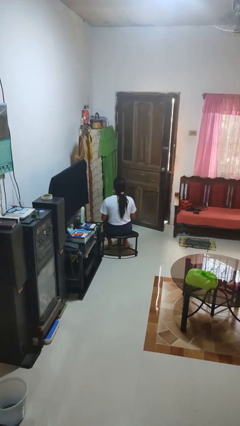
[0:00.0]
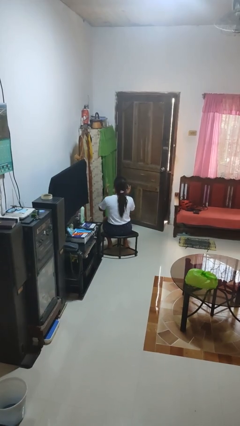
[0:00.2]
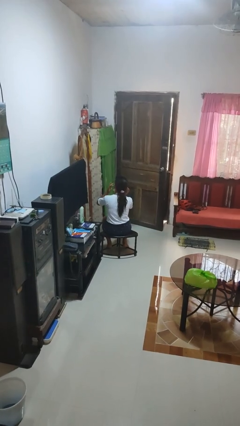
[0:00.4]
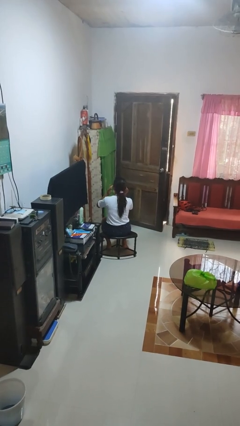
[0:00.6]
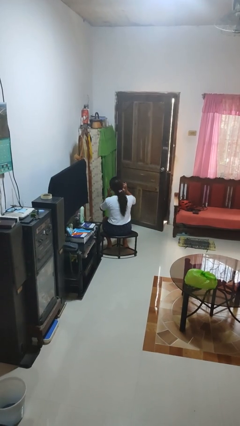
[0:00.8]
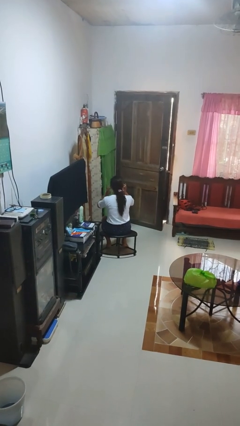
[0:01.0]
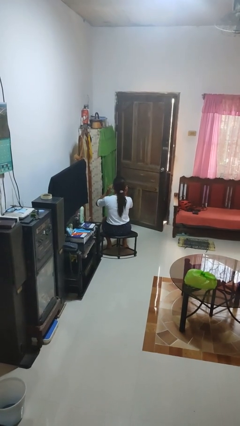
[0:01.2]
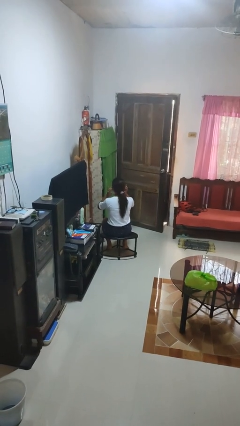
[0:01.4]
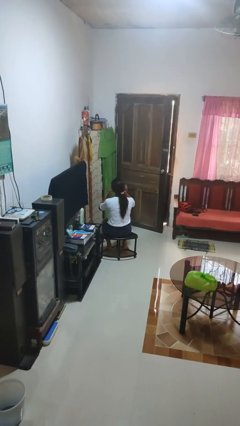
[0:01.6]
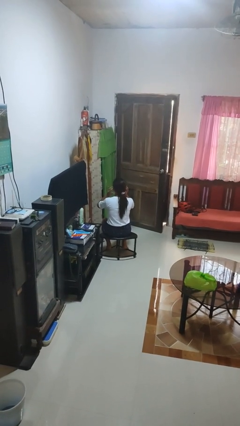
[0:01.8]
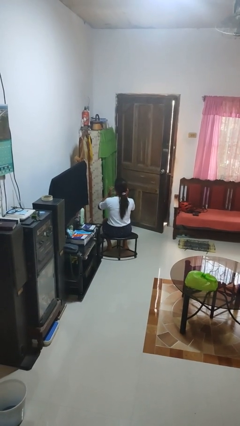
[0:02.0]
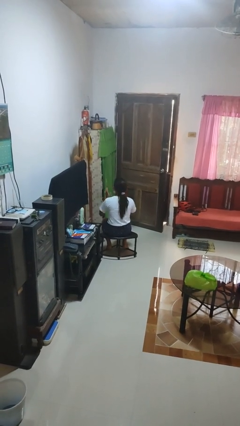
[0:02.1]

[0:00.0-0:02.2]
person puts fingers in ear

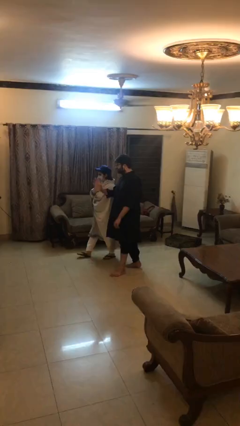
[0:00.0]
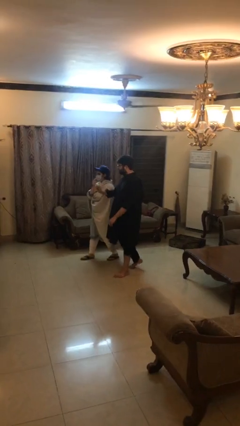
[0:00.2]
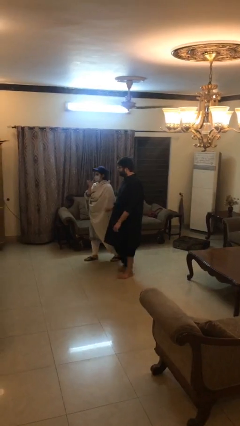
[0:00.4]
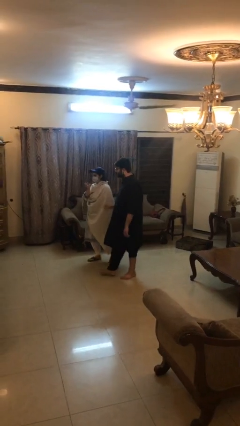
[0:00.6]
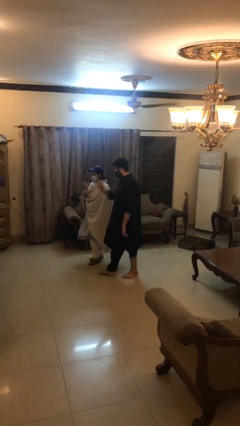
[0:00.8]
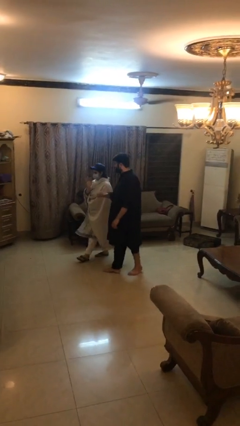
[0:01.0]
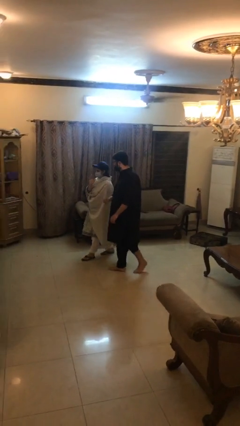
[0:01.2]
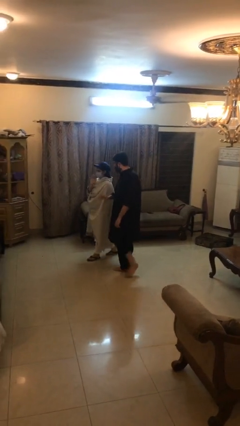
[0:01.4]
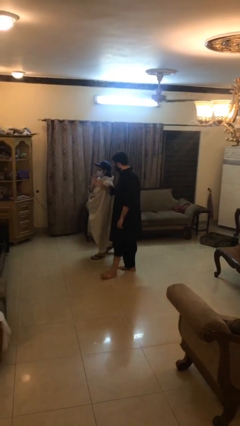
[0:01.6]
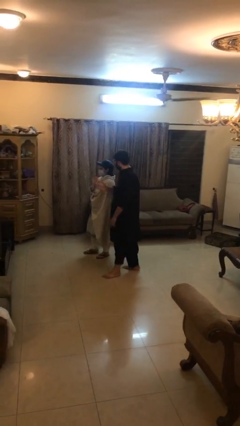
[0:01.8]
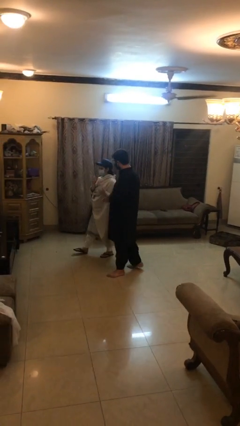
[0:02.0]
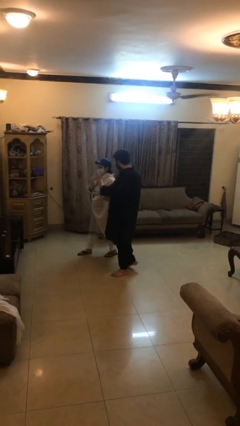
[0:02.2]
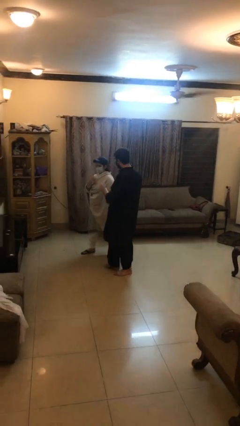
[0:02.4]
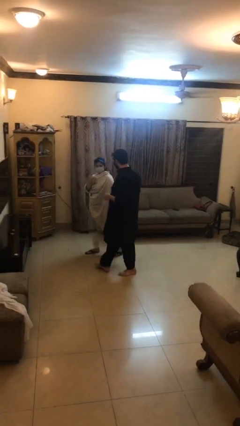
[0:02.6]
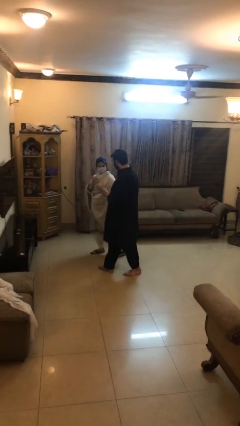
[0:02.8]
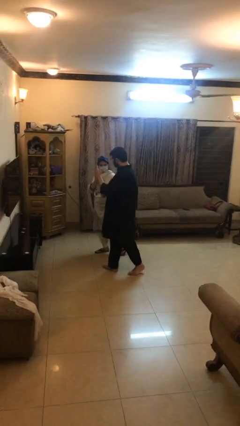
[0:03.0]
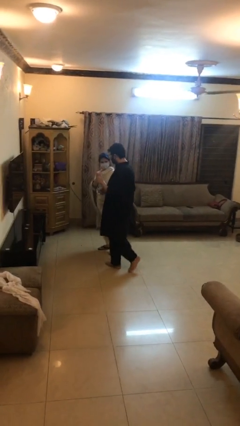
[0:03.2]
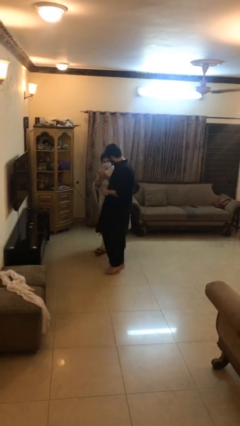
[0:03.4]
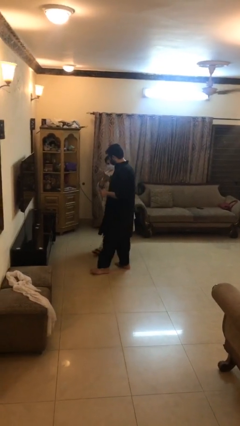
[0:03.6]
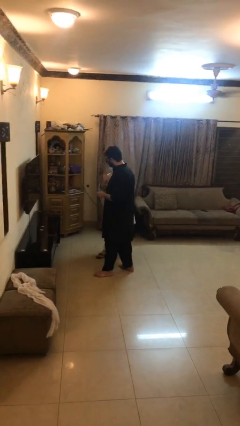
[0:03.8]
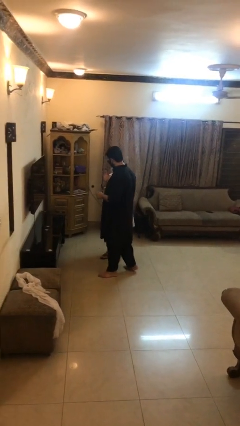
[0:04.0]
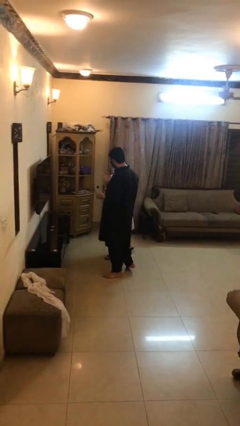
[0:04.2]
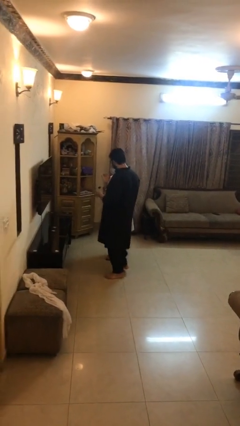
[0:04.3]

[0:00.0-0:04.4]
person talks to person

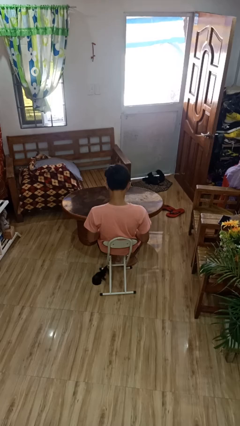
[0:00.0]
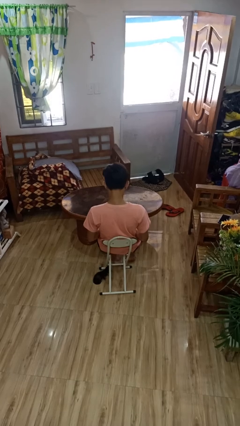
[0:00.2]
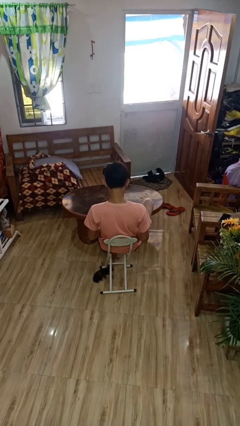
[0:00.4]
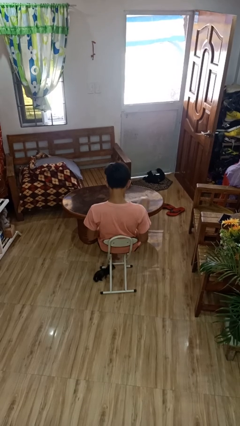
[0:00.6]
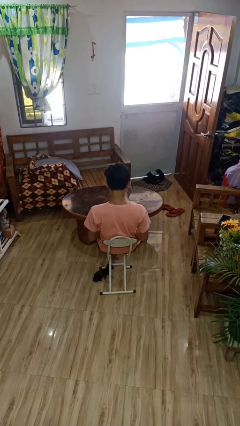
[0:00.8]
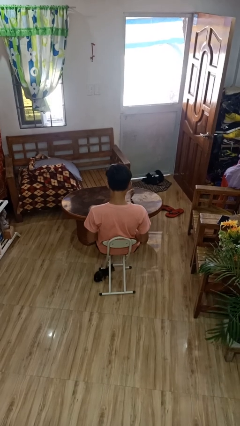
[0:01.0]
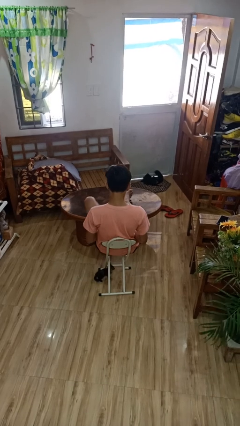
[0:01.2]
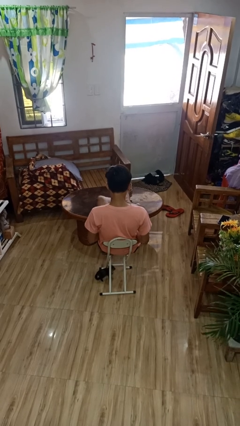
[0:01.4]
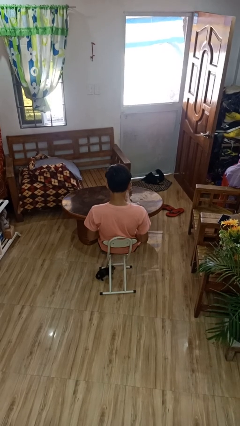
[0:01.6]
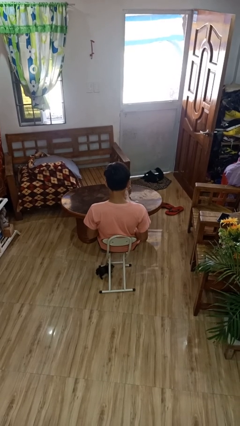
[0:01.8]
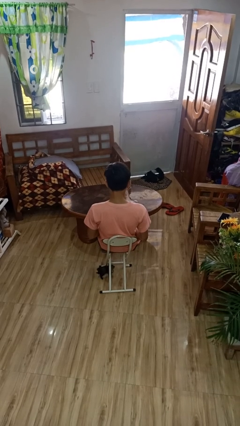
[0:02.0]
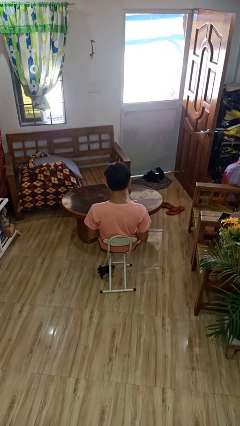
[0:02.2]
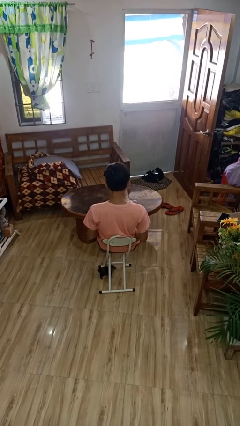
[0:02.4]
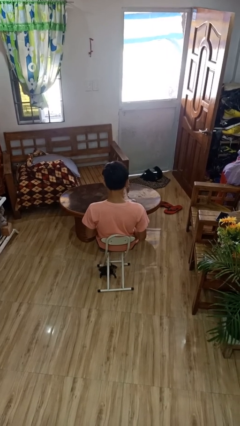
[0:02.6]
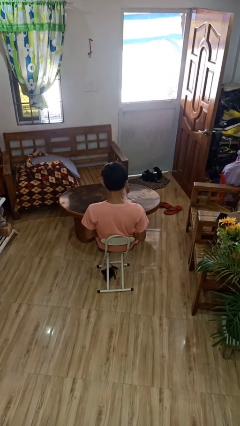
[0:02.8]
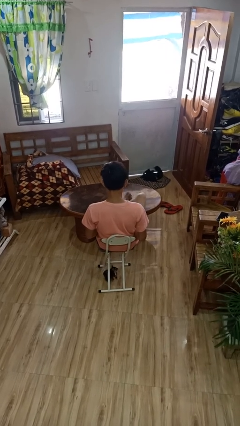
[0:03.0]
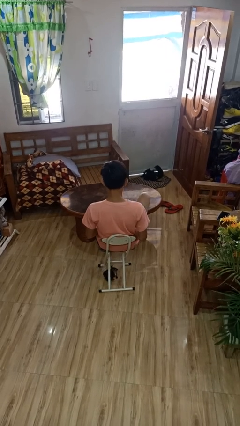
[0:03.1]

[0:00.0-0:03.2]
person puts feet up

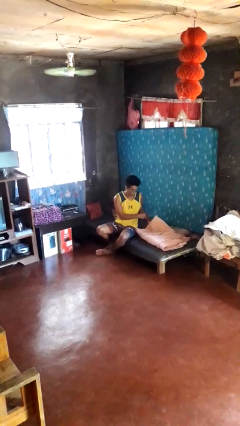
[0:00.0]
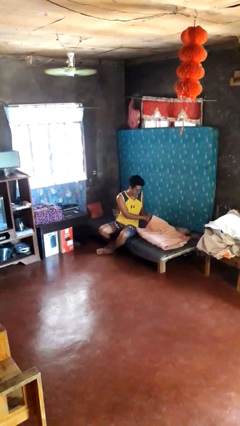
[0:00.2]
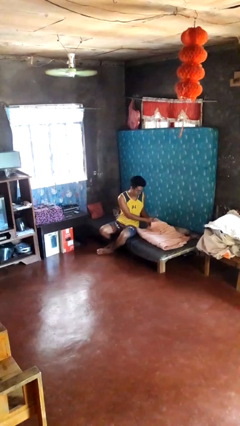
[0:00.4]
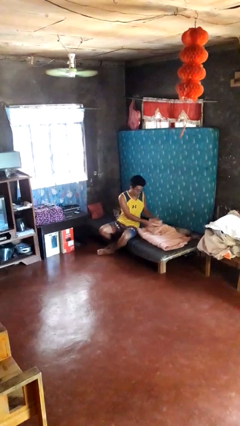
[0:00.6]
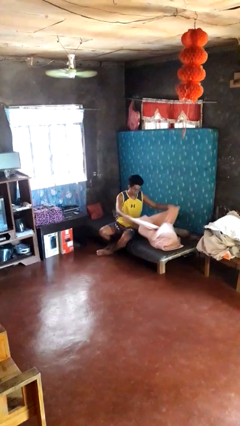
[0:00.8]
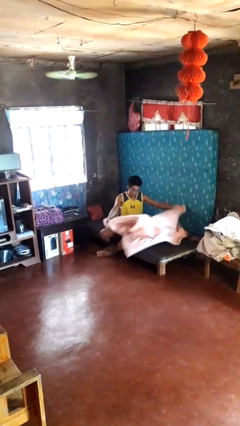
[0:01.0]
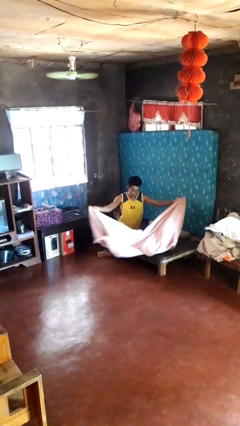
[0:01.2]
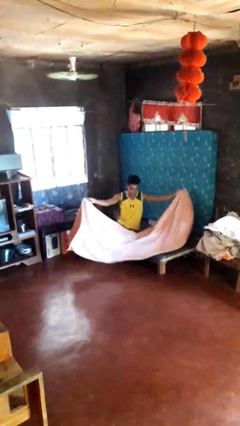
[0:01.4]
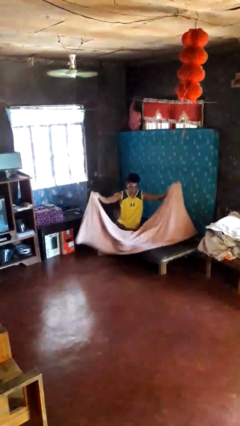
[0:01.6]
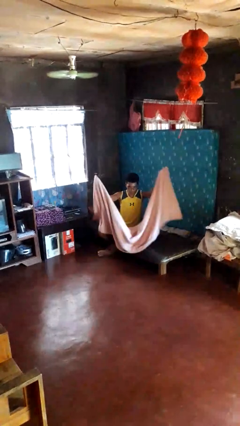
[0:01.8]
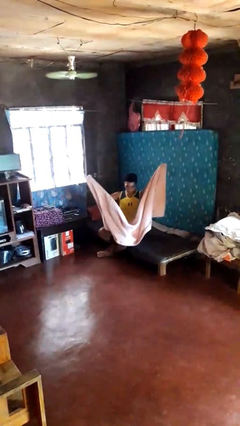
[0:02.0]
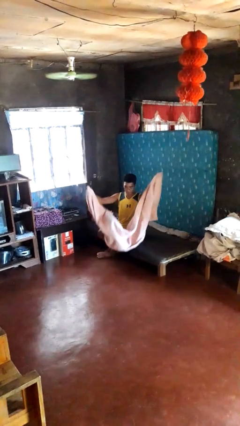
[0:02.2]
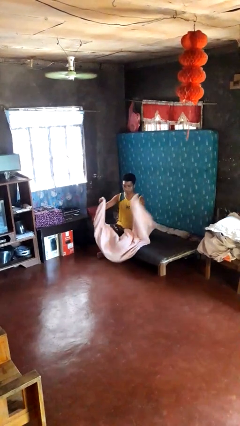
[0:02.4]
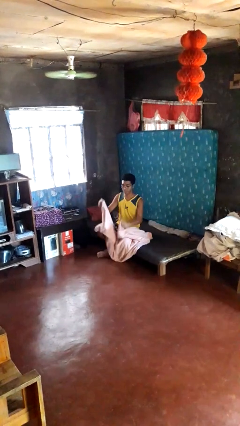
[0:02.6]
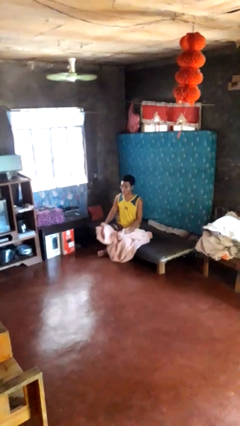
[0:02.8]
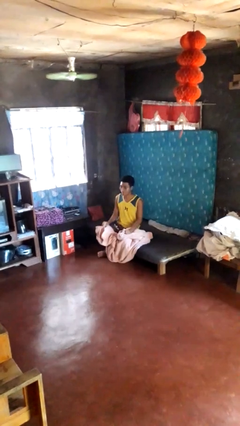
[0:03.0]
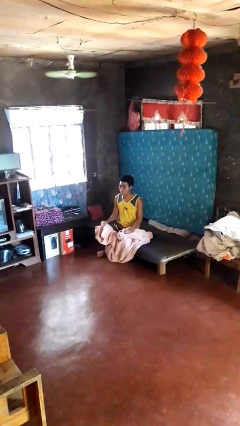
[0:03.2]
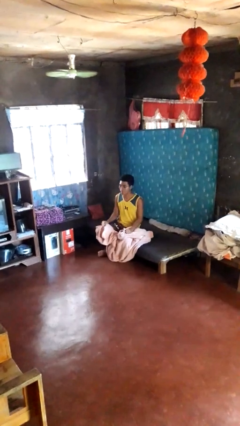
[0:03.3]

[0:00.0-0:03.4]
person unfolds blanket

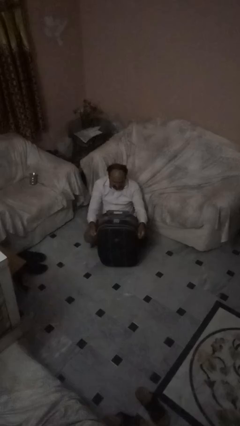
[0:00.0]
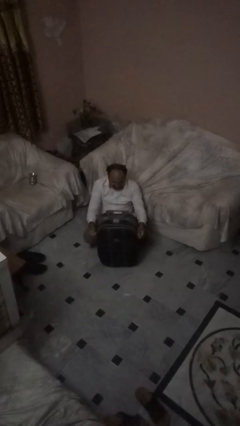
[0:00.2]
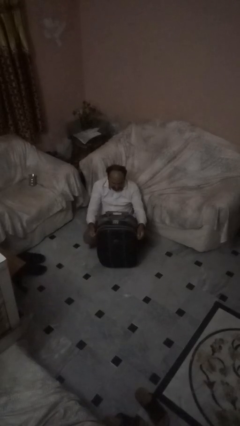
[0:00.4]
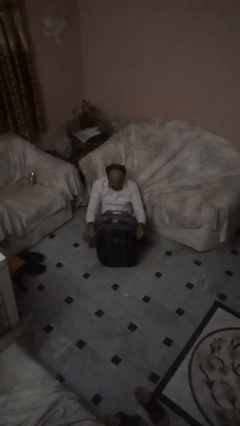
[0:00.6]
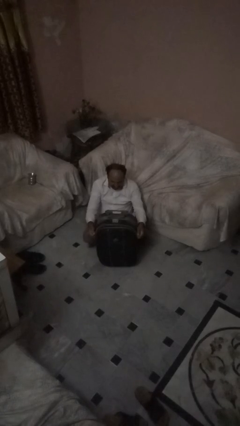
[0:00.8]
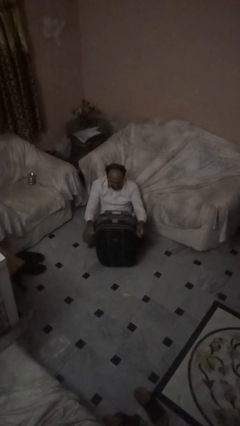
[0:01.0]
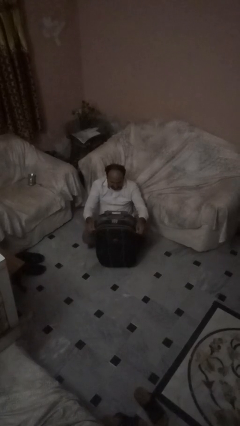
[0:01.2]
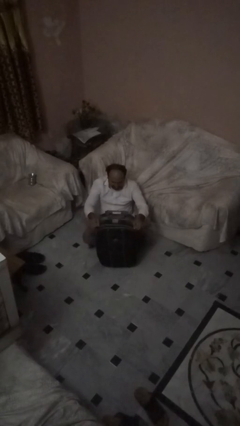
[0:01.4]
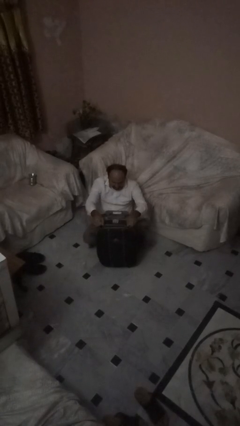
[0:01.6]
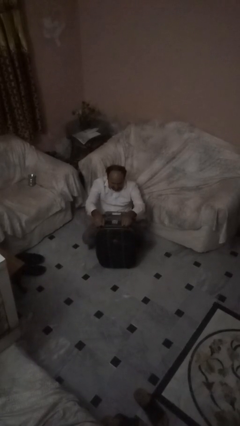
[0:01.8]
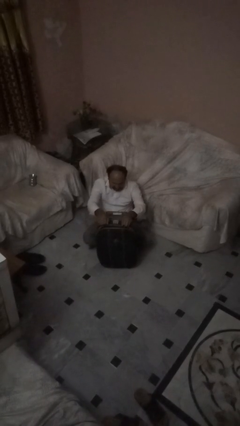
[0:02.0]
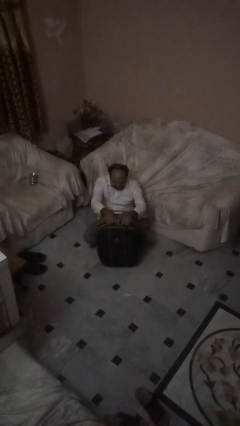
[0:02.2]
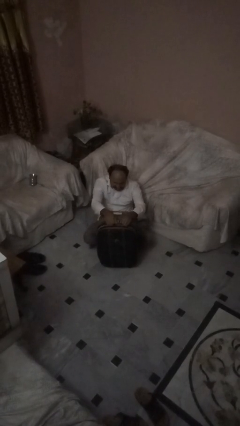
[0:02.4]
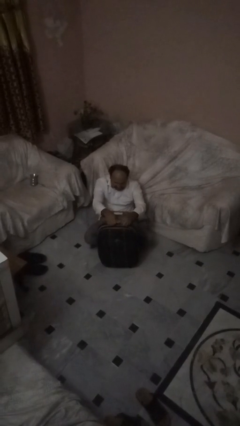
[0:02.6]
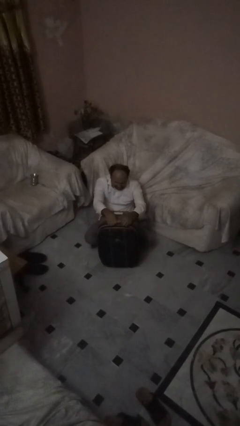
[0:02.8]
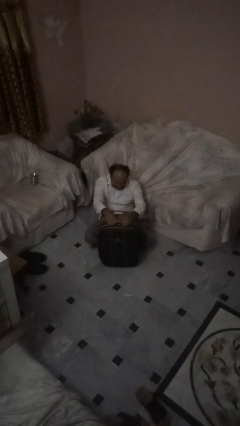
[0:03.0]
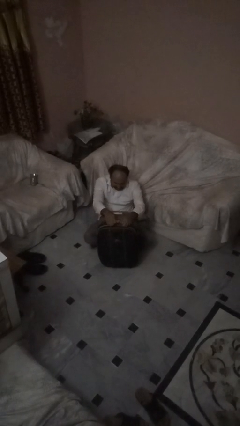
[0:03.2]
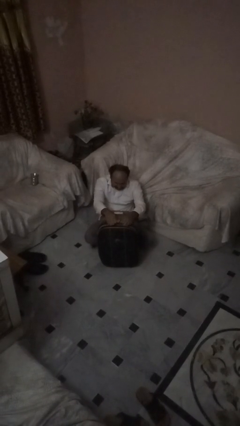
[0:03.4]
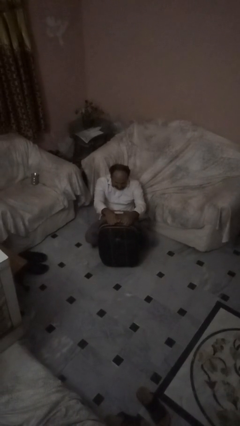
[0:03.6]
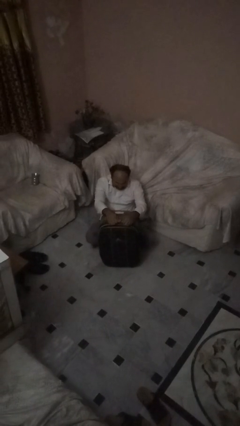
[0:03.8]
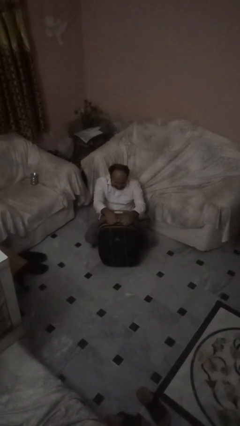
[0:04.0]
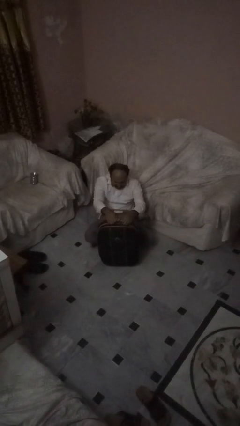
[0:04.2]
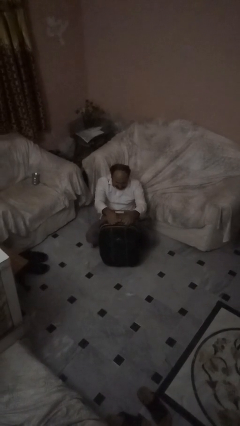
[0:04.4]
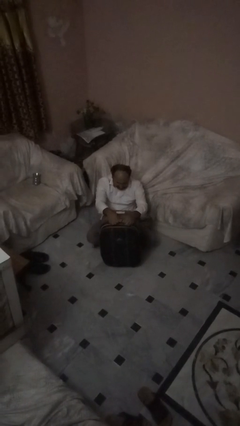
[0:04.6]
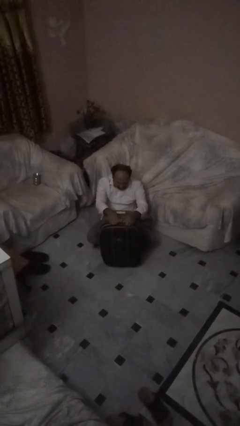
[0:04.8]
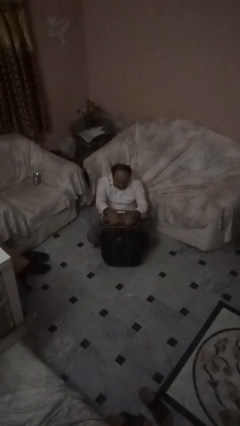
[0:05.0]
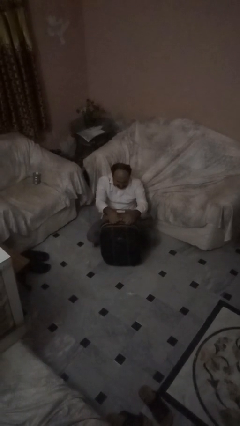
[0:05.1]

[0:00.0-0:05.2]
person closes suitcase
